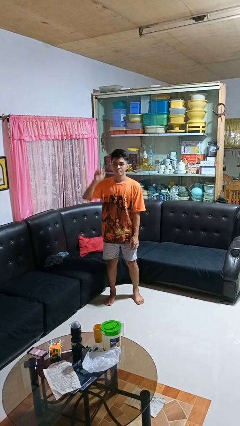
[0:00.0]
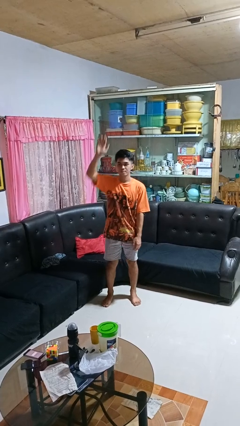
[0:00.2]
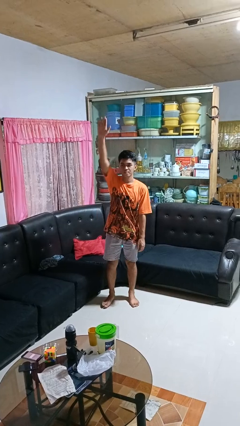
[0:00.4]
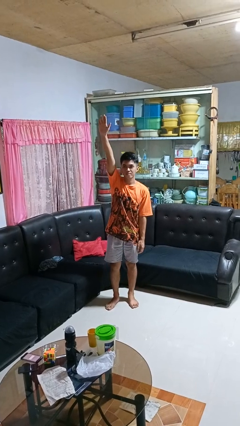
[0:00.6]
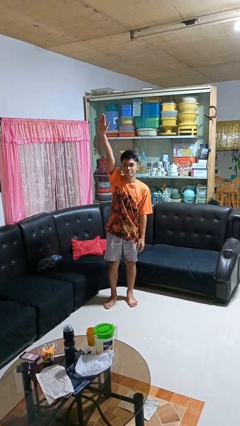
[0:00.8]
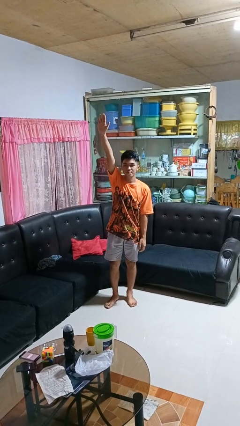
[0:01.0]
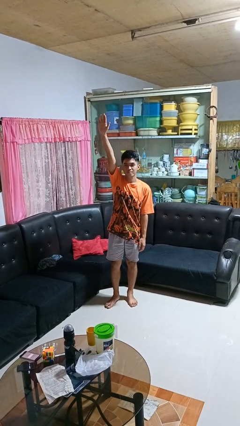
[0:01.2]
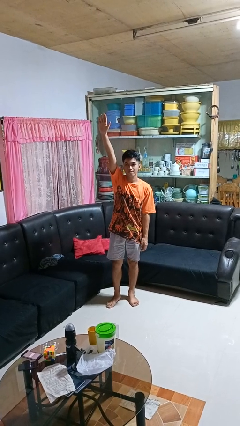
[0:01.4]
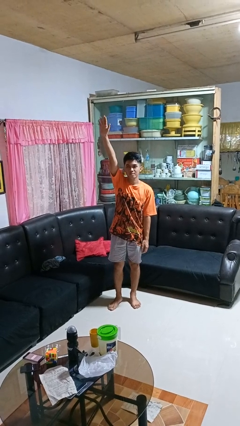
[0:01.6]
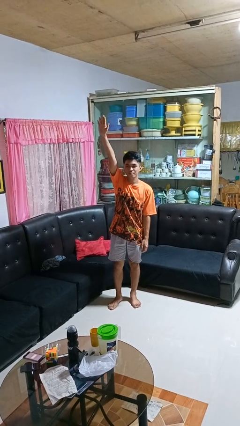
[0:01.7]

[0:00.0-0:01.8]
person gestures raise hand

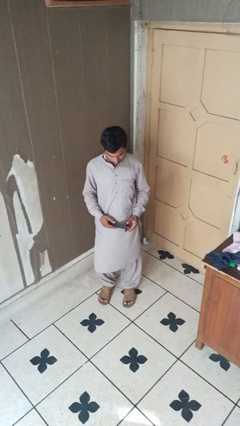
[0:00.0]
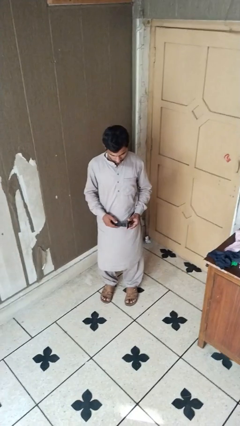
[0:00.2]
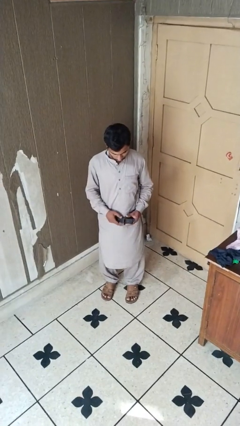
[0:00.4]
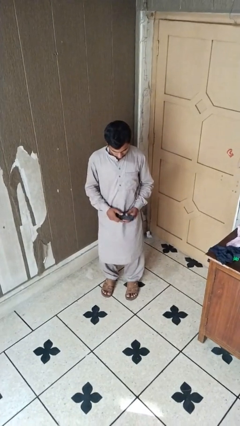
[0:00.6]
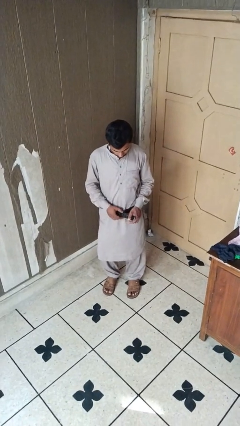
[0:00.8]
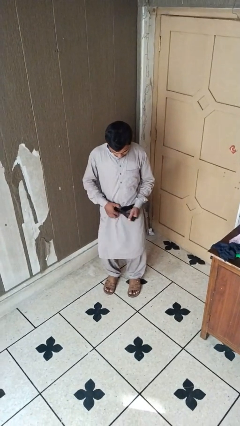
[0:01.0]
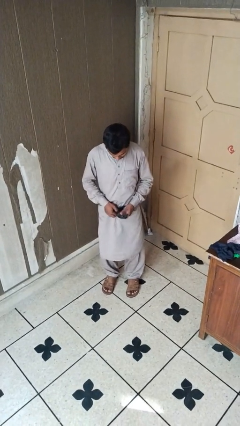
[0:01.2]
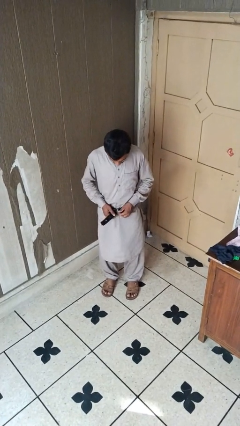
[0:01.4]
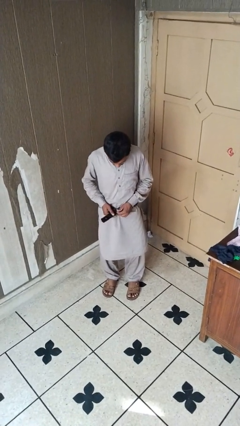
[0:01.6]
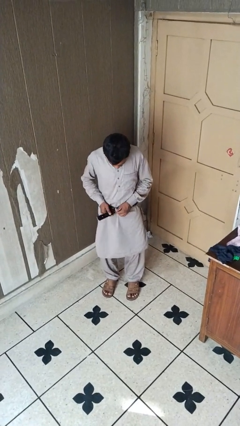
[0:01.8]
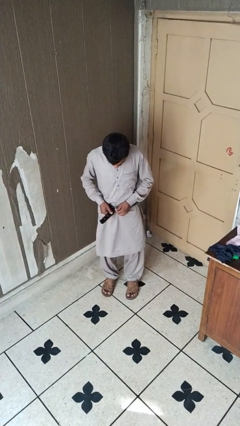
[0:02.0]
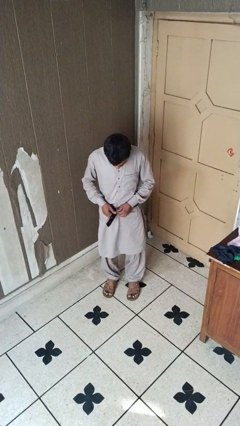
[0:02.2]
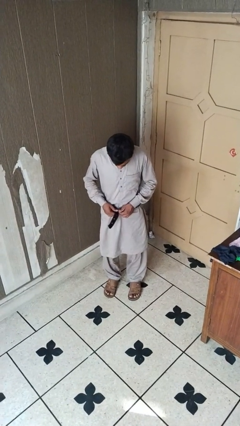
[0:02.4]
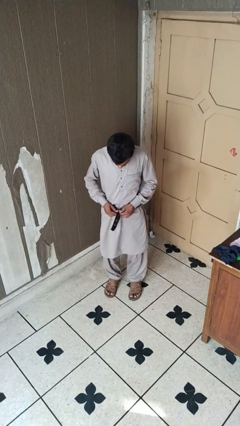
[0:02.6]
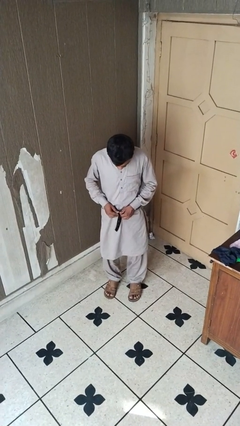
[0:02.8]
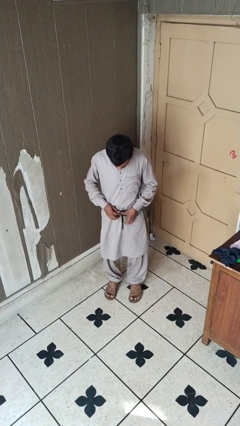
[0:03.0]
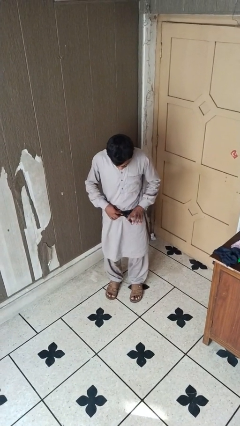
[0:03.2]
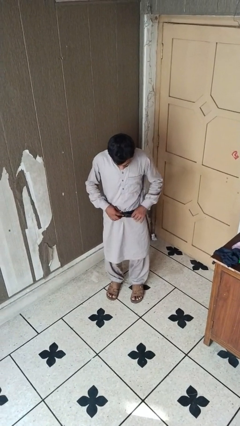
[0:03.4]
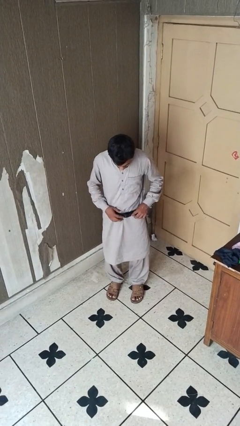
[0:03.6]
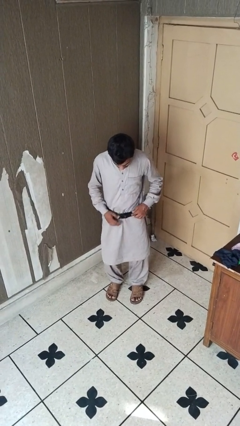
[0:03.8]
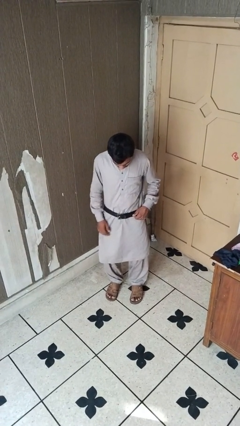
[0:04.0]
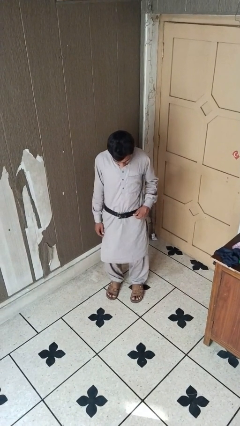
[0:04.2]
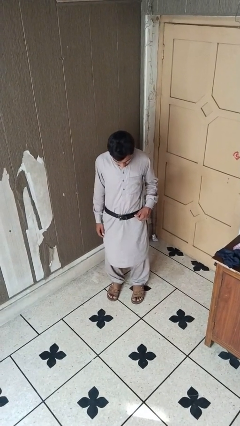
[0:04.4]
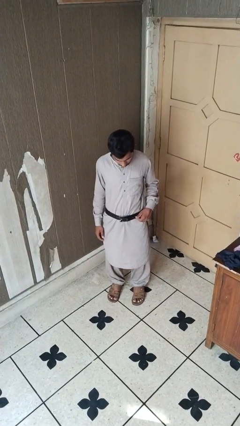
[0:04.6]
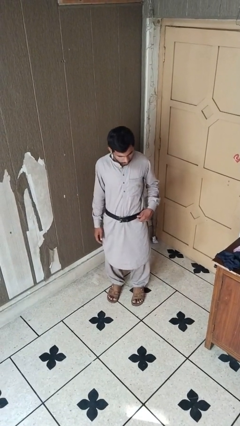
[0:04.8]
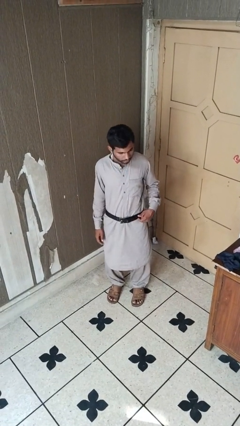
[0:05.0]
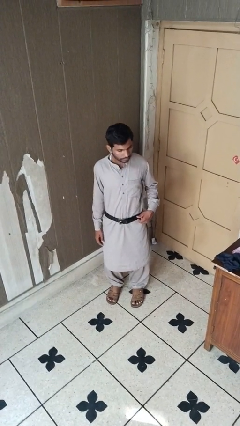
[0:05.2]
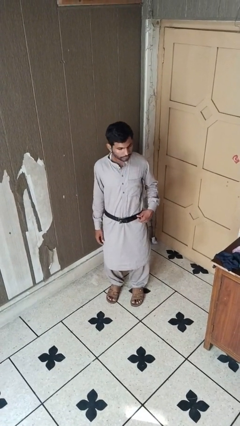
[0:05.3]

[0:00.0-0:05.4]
person puts on belt

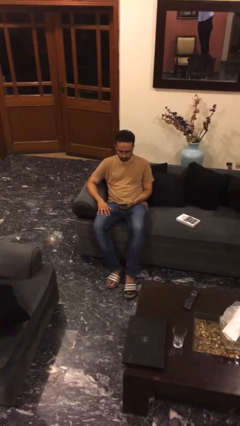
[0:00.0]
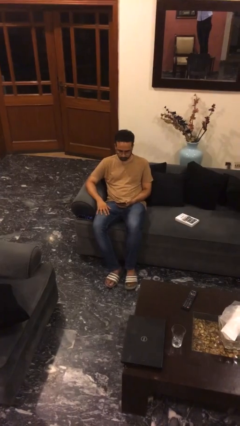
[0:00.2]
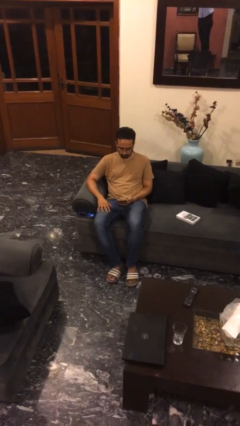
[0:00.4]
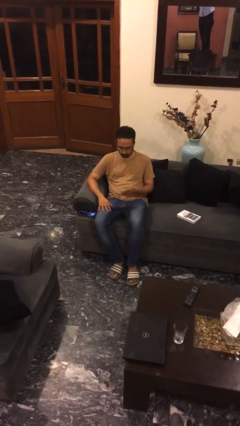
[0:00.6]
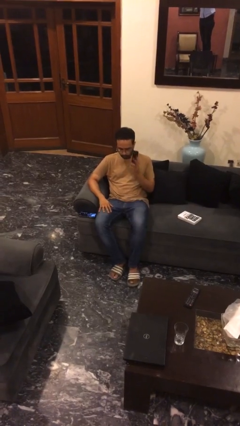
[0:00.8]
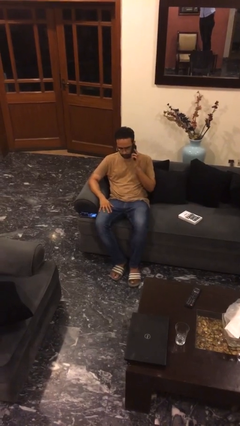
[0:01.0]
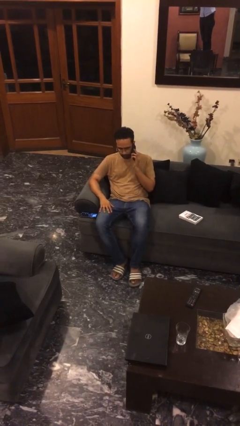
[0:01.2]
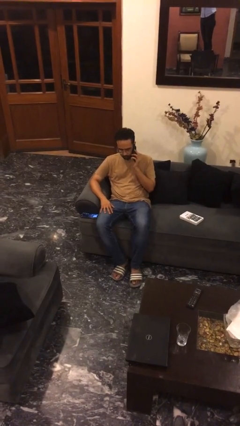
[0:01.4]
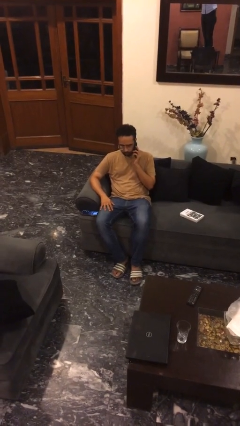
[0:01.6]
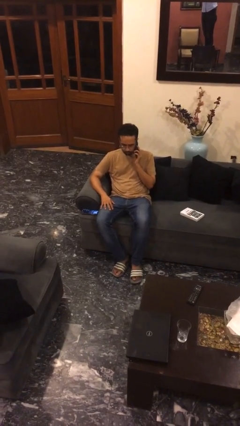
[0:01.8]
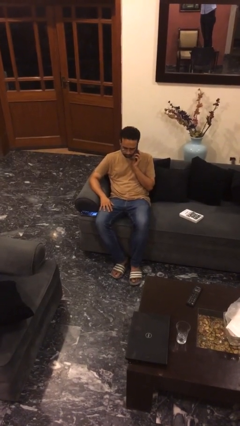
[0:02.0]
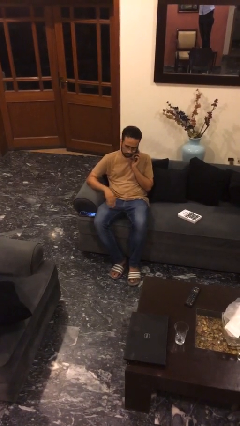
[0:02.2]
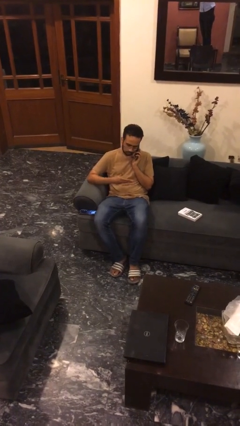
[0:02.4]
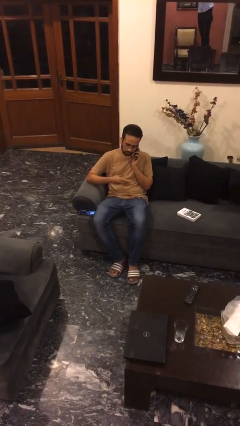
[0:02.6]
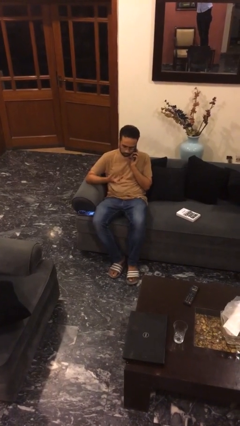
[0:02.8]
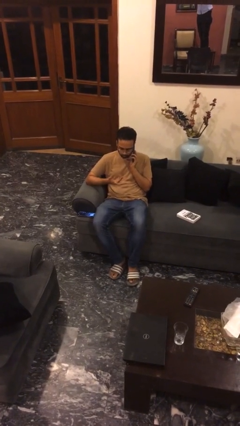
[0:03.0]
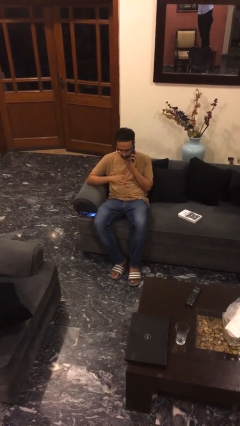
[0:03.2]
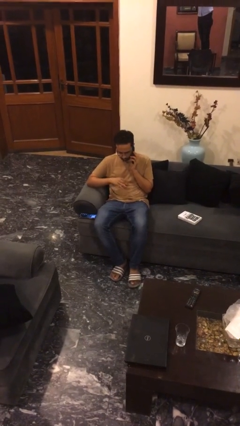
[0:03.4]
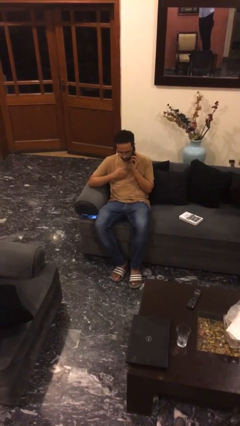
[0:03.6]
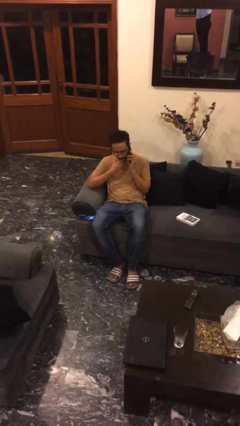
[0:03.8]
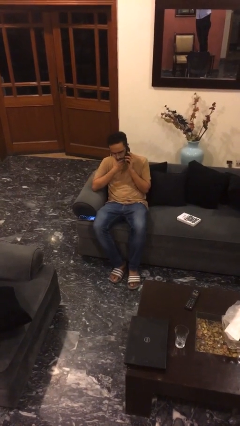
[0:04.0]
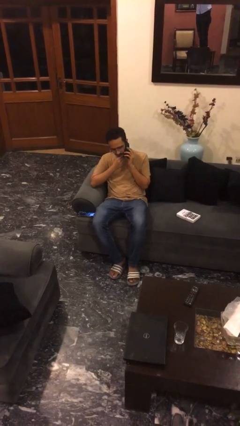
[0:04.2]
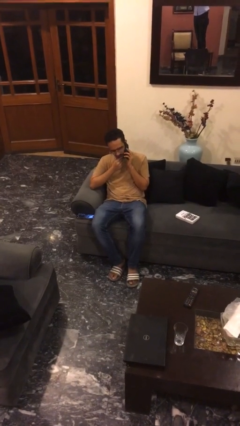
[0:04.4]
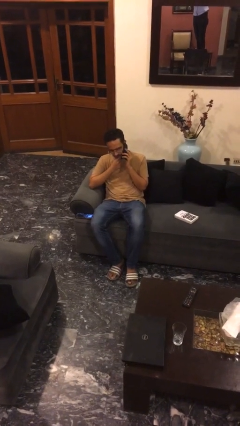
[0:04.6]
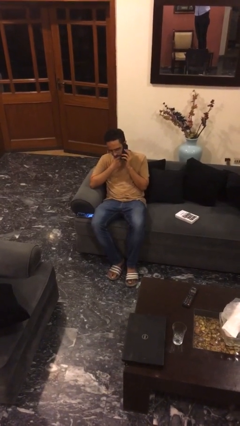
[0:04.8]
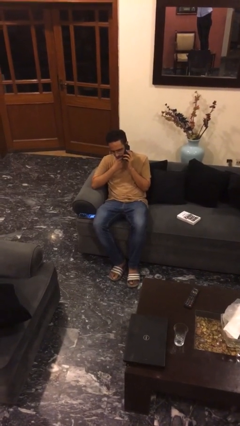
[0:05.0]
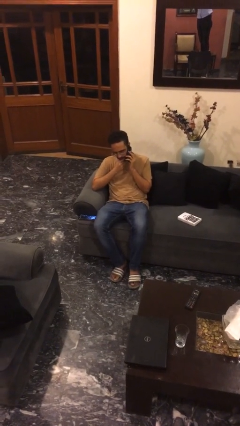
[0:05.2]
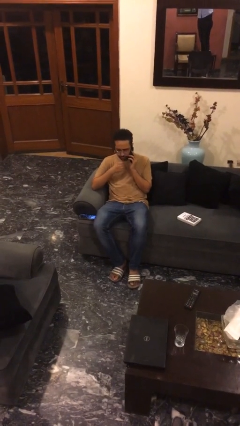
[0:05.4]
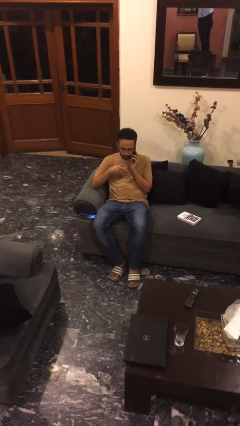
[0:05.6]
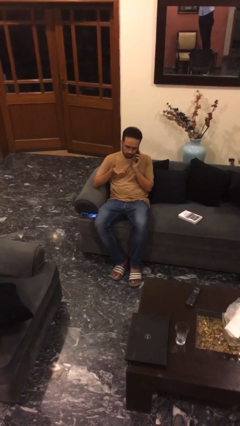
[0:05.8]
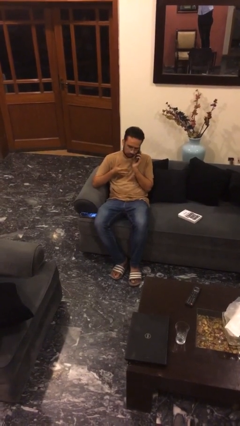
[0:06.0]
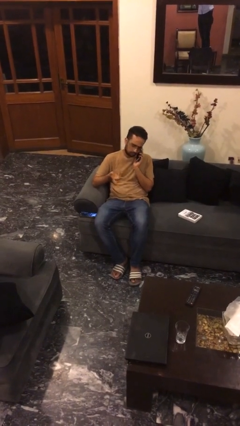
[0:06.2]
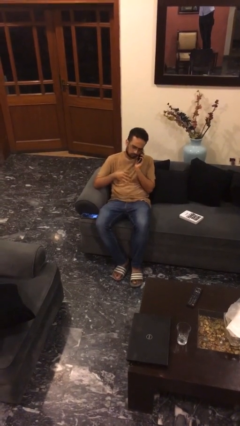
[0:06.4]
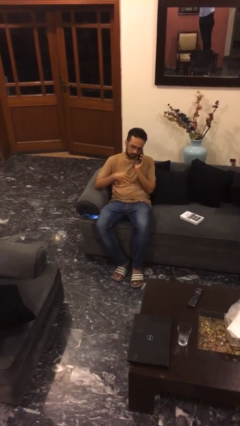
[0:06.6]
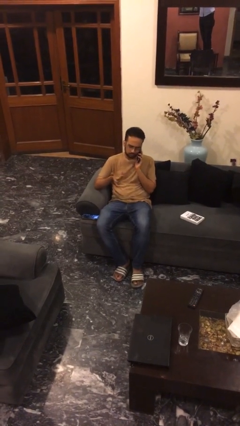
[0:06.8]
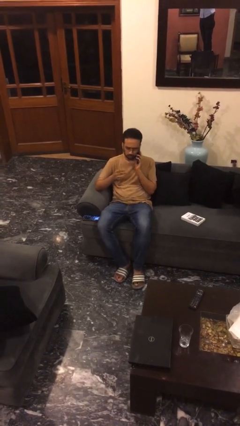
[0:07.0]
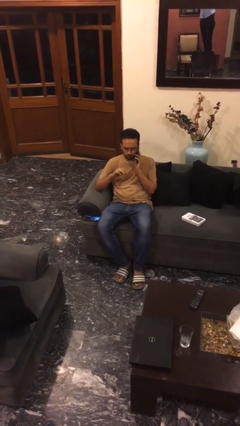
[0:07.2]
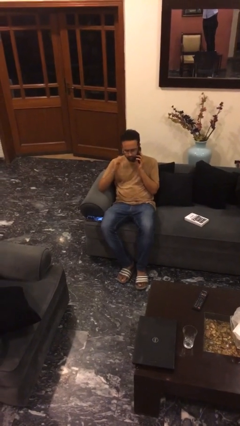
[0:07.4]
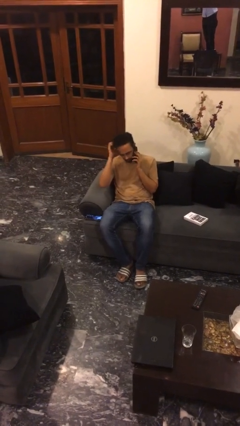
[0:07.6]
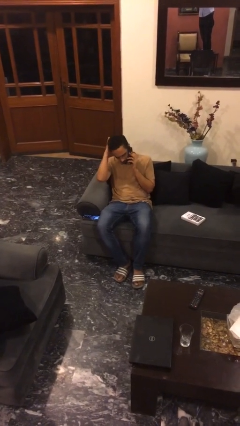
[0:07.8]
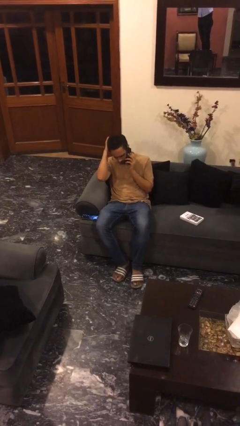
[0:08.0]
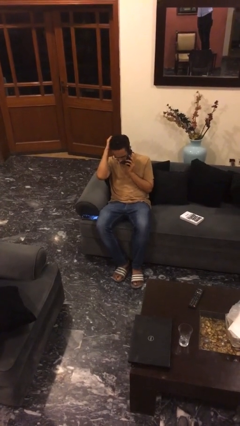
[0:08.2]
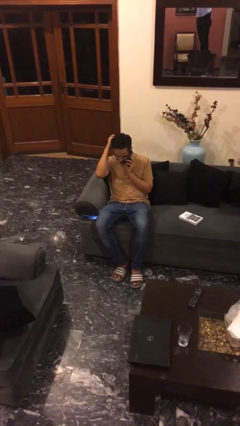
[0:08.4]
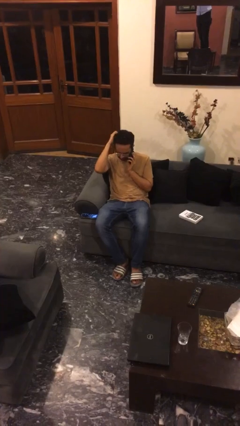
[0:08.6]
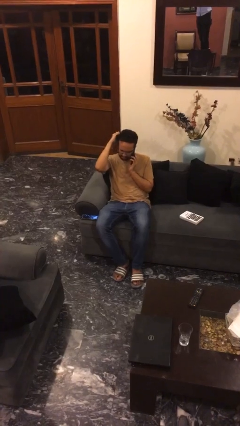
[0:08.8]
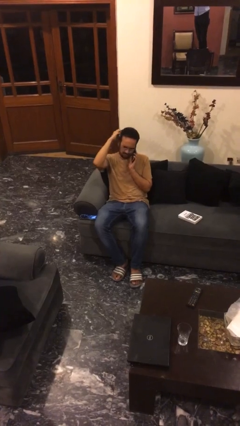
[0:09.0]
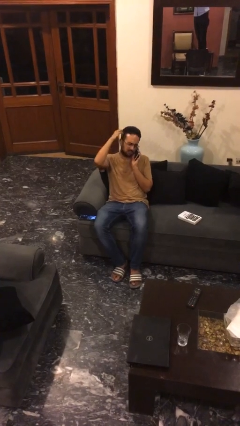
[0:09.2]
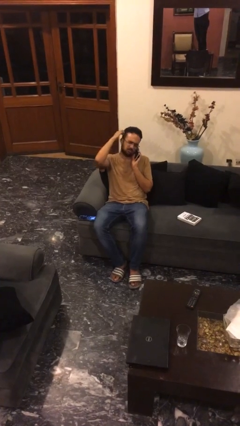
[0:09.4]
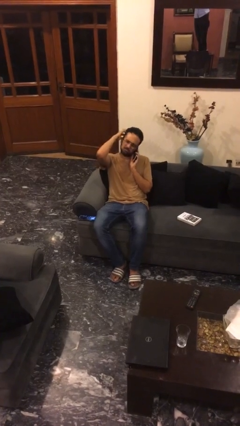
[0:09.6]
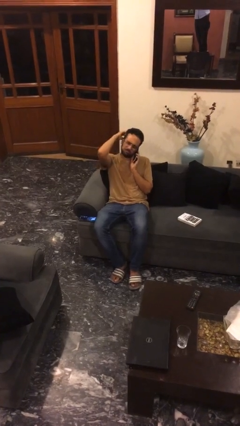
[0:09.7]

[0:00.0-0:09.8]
person talks on phone

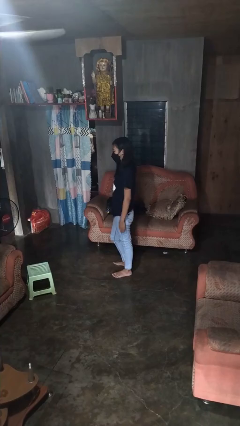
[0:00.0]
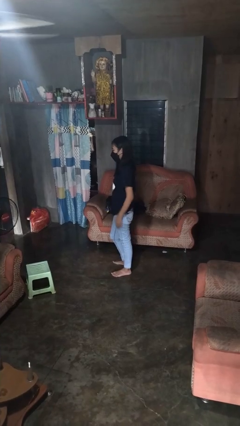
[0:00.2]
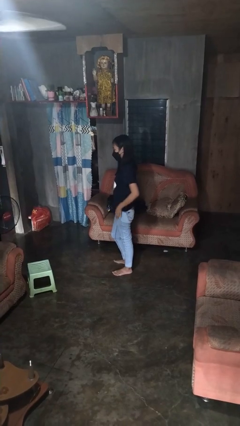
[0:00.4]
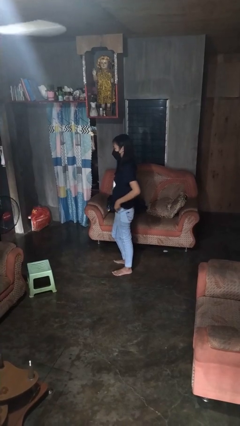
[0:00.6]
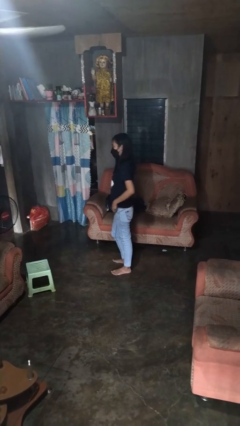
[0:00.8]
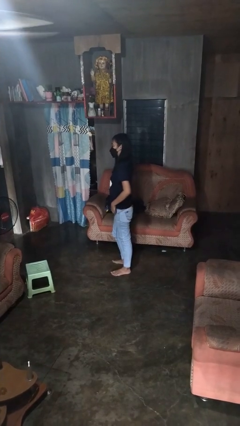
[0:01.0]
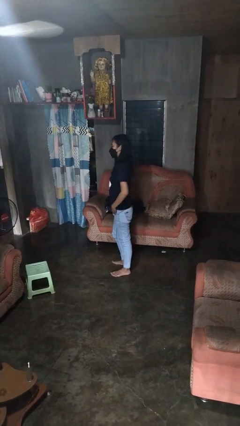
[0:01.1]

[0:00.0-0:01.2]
person puts hands in back pockets
